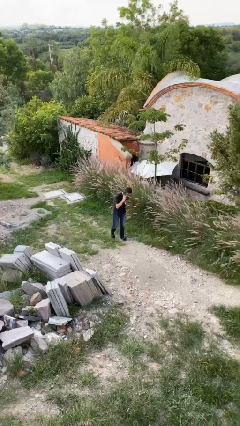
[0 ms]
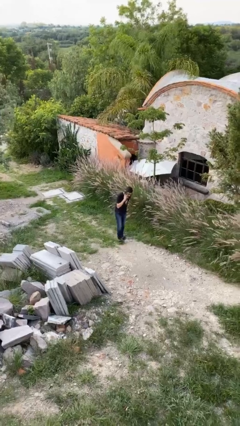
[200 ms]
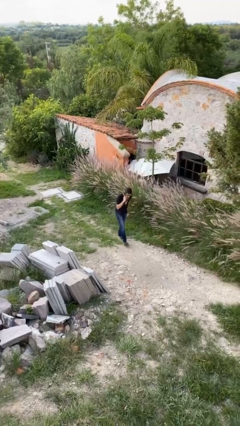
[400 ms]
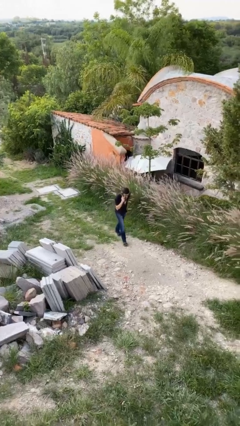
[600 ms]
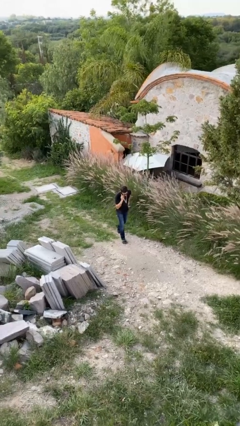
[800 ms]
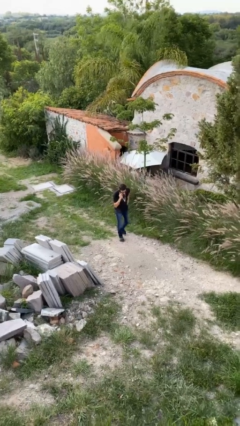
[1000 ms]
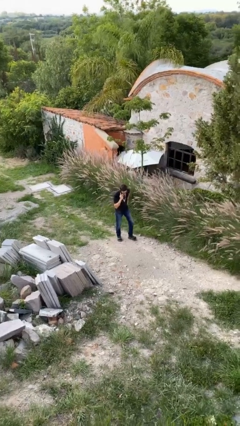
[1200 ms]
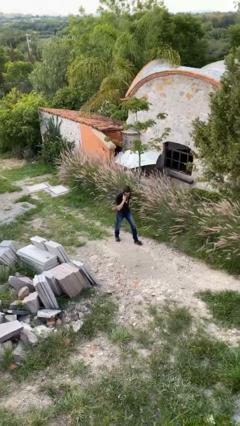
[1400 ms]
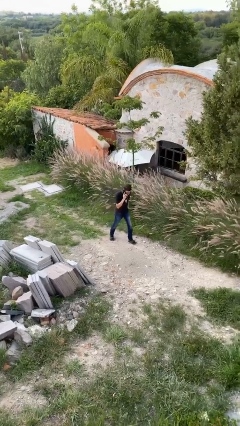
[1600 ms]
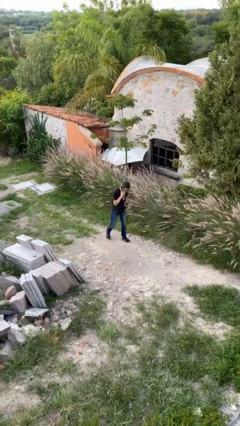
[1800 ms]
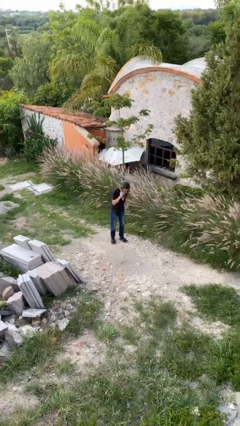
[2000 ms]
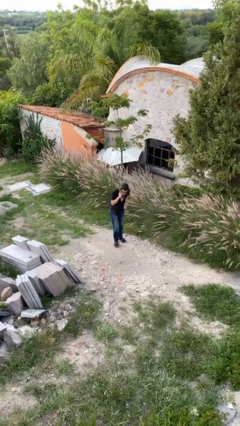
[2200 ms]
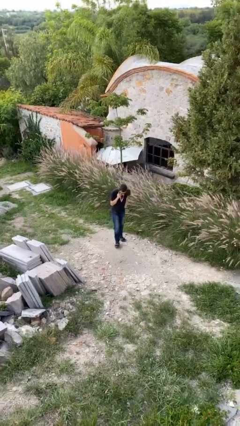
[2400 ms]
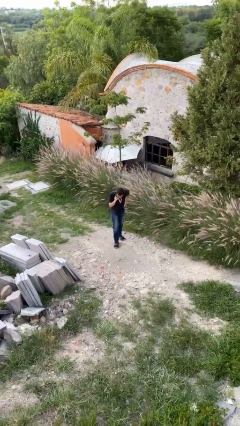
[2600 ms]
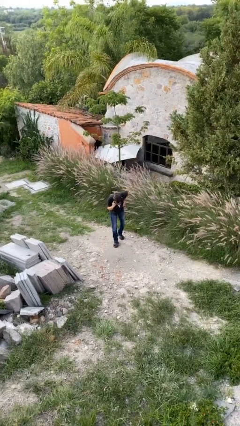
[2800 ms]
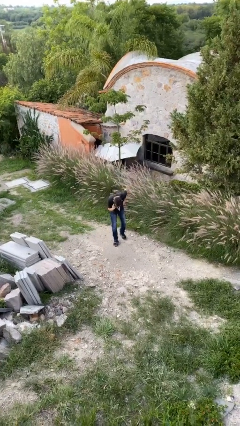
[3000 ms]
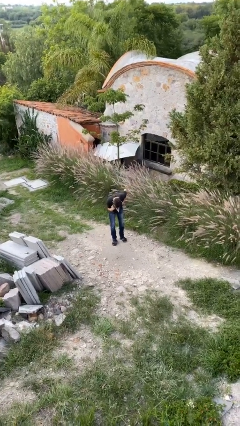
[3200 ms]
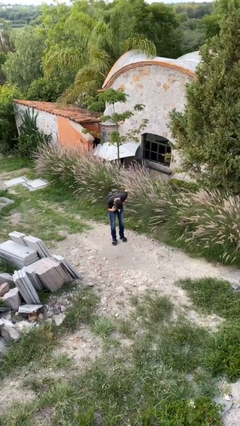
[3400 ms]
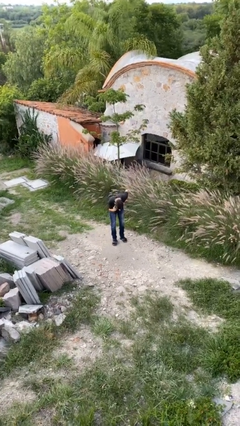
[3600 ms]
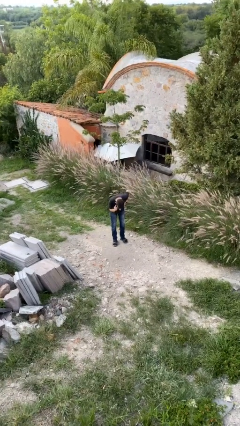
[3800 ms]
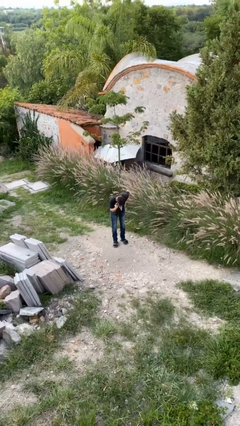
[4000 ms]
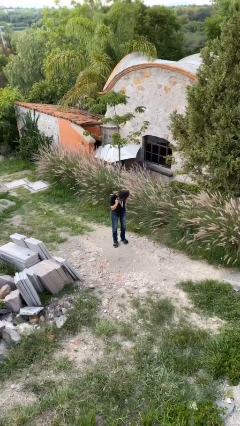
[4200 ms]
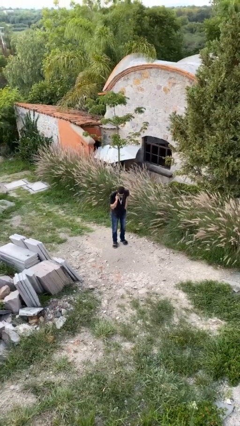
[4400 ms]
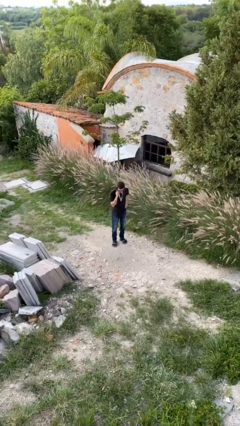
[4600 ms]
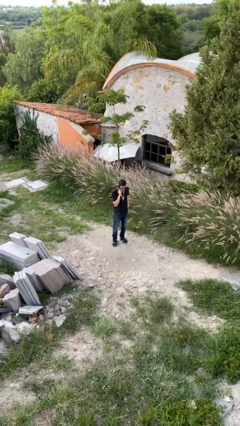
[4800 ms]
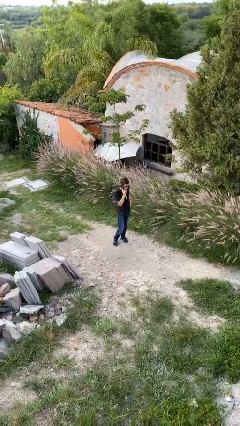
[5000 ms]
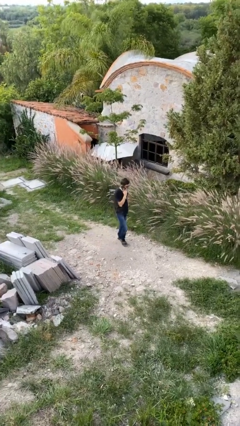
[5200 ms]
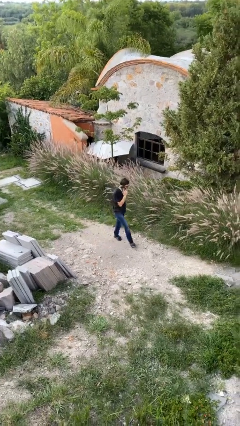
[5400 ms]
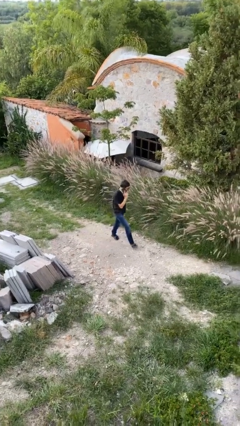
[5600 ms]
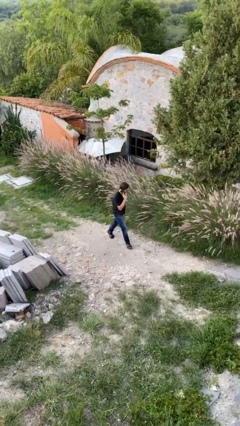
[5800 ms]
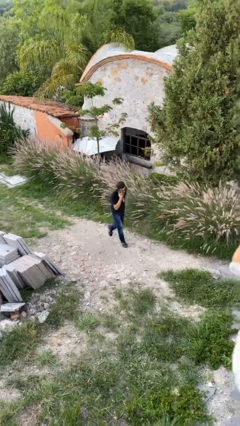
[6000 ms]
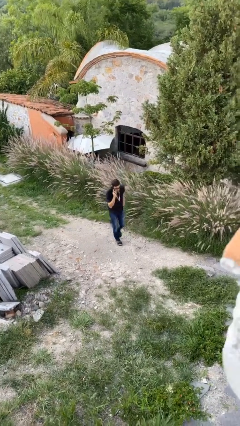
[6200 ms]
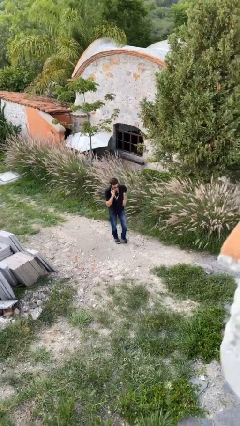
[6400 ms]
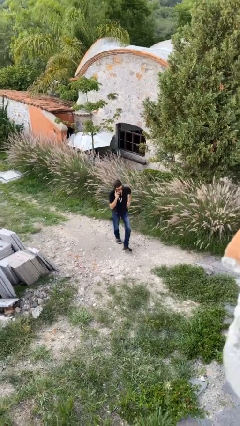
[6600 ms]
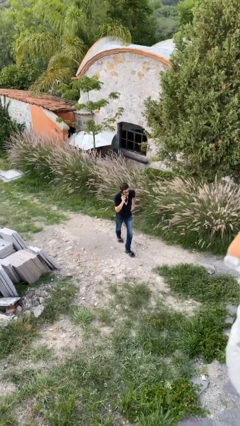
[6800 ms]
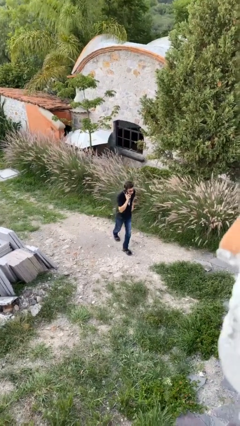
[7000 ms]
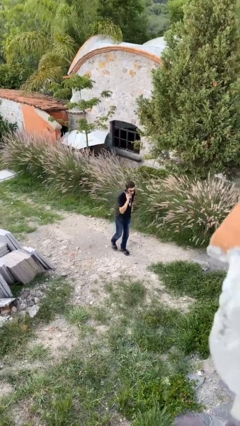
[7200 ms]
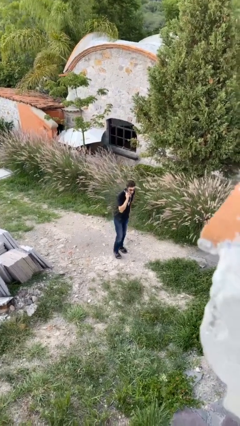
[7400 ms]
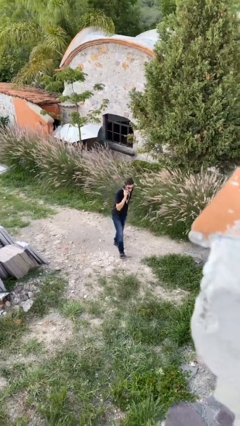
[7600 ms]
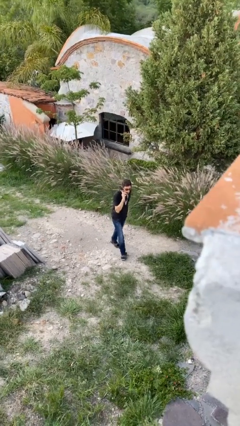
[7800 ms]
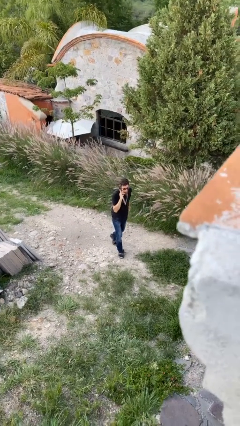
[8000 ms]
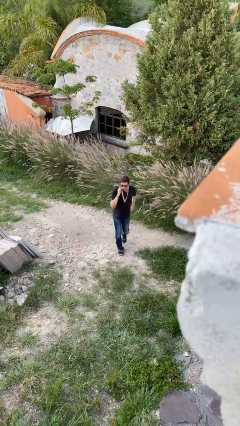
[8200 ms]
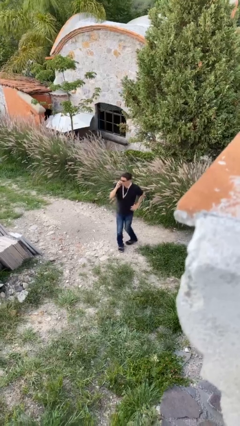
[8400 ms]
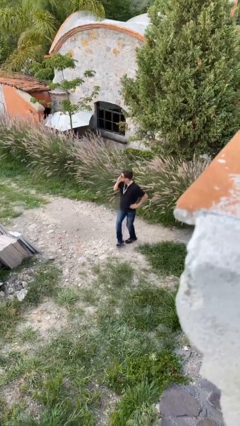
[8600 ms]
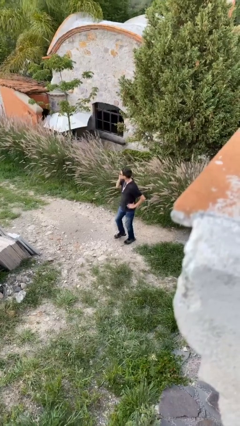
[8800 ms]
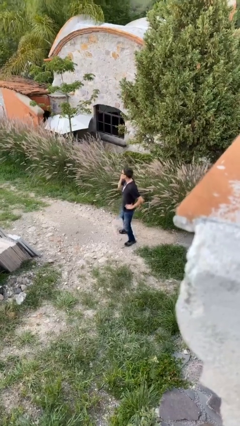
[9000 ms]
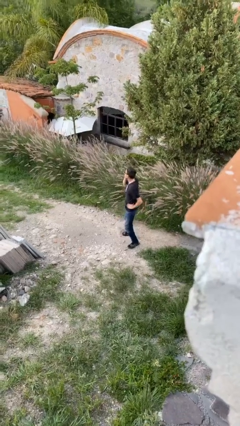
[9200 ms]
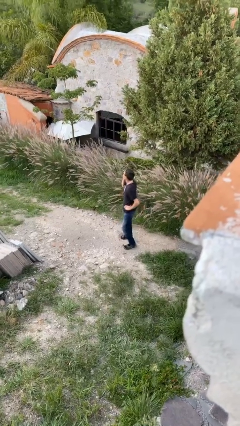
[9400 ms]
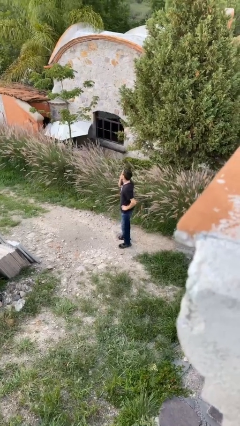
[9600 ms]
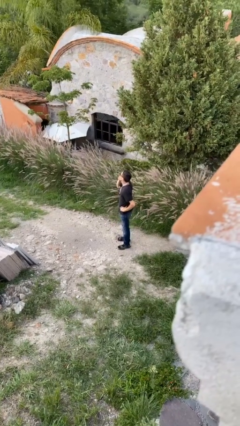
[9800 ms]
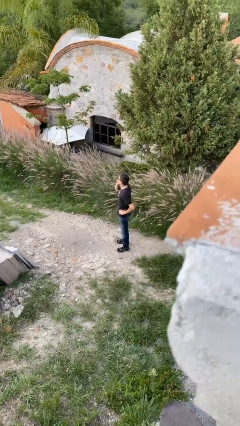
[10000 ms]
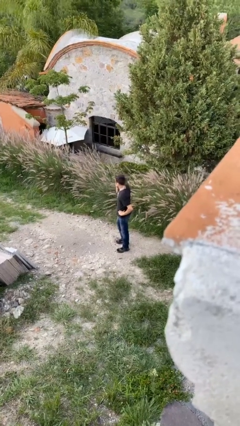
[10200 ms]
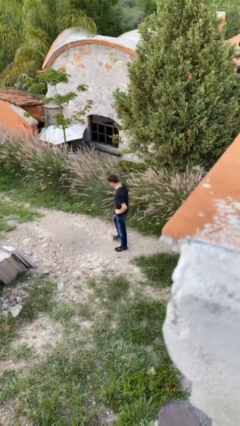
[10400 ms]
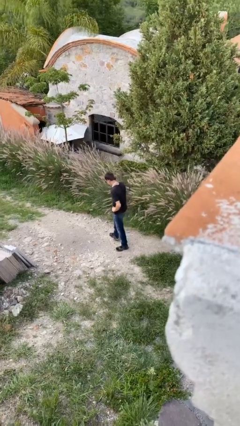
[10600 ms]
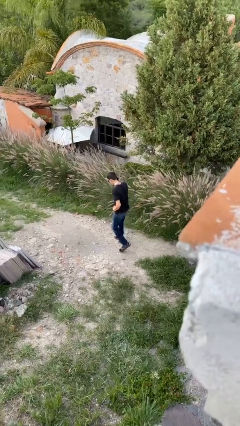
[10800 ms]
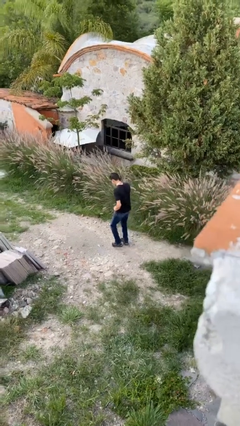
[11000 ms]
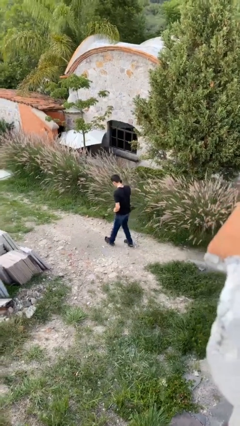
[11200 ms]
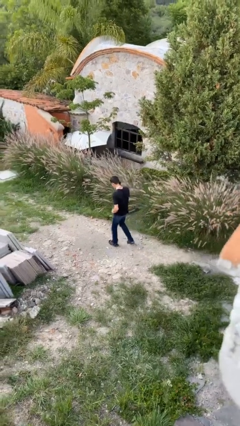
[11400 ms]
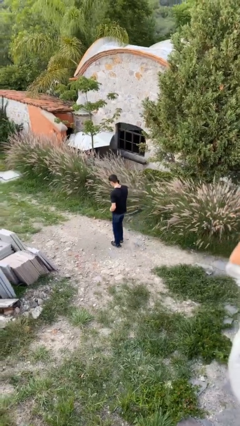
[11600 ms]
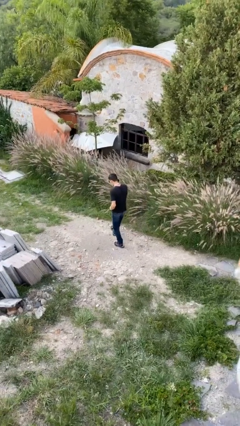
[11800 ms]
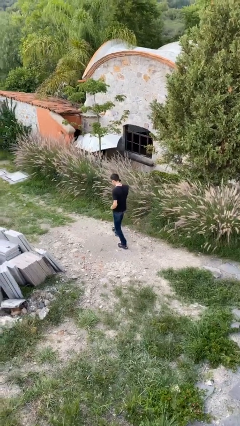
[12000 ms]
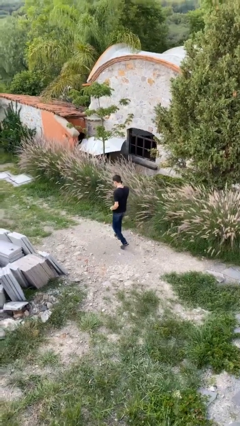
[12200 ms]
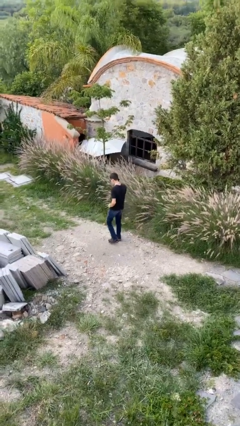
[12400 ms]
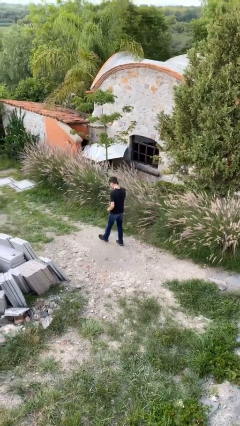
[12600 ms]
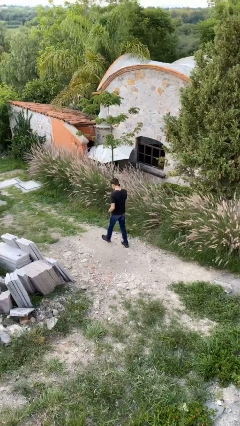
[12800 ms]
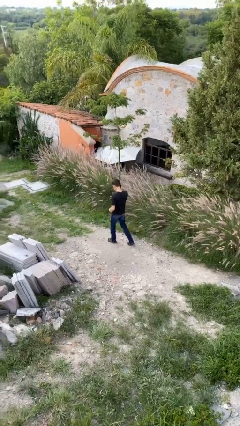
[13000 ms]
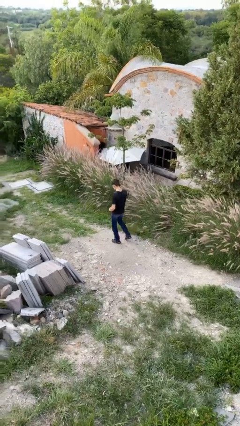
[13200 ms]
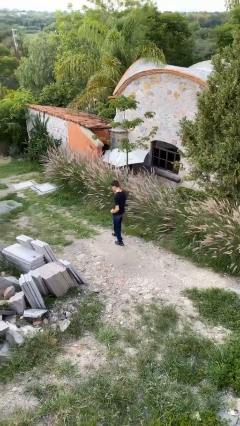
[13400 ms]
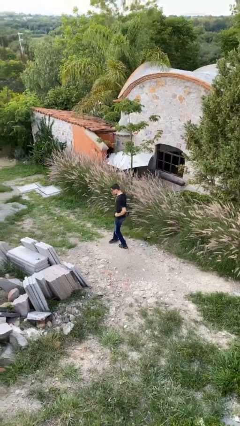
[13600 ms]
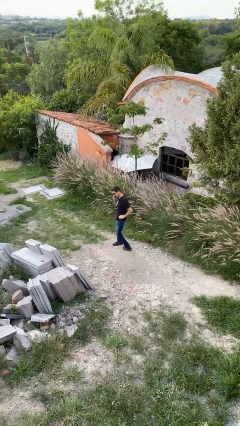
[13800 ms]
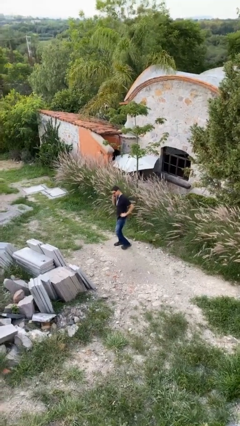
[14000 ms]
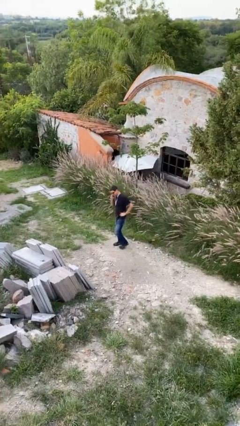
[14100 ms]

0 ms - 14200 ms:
person talks on phone

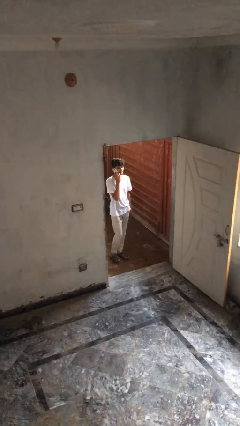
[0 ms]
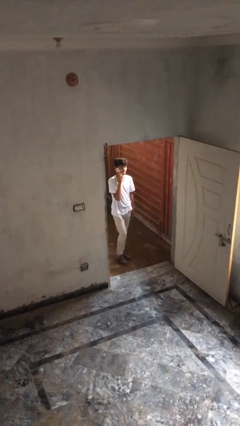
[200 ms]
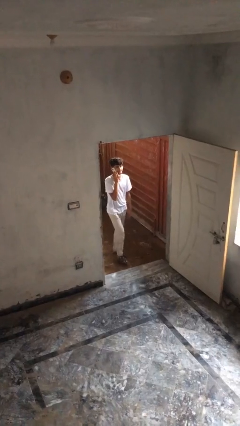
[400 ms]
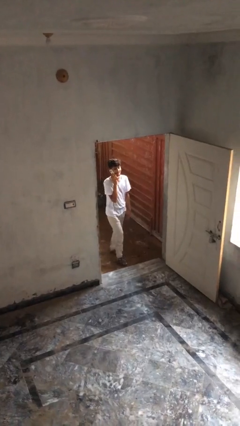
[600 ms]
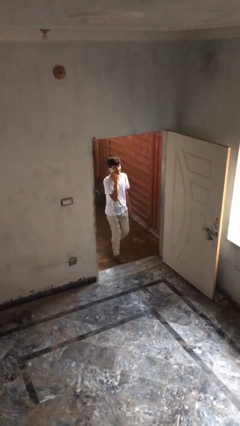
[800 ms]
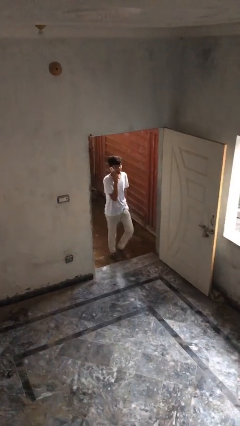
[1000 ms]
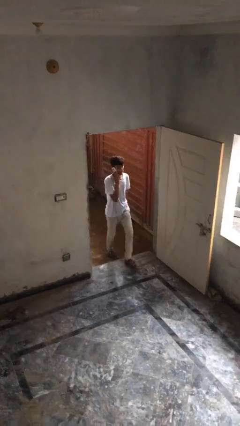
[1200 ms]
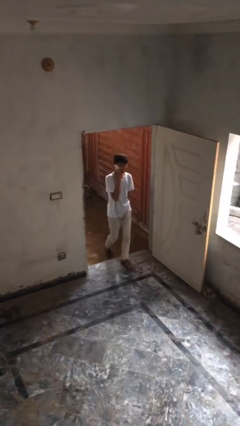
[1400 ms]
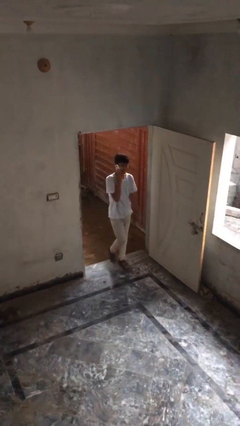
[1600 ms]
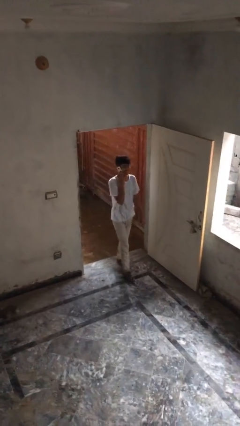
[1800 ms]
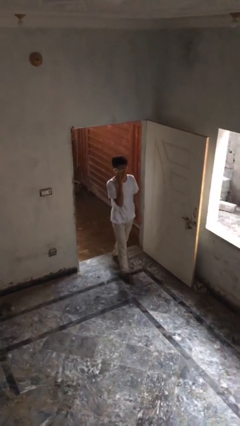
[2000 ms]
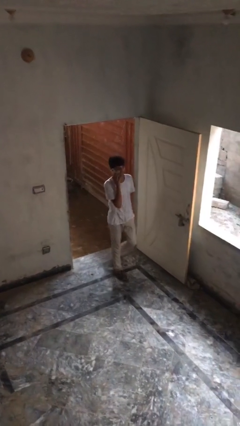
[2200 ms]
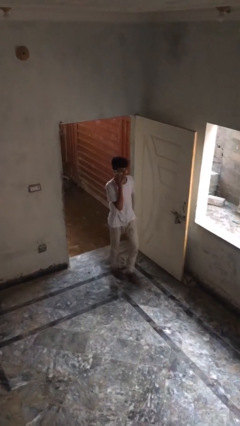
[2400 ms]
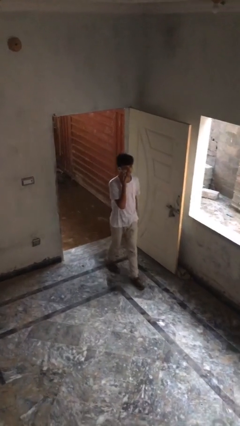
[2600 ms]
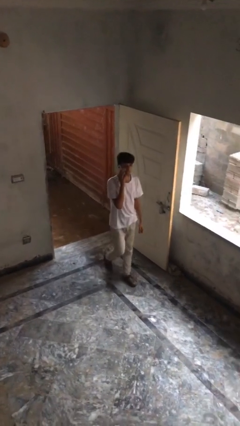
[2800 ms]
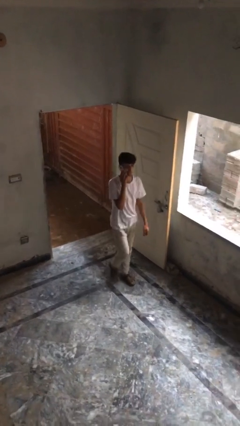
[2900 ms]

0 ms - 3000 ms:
person enters scene through structure

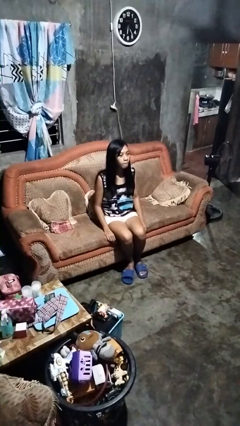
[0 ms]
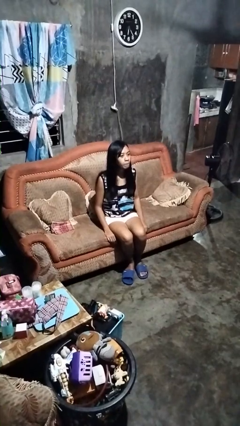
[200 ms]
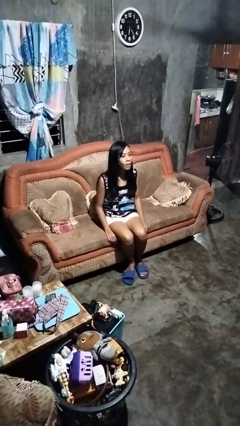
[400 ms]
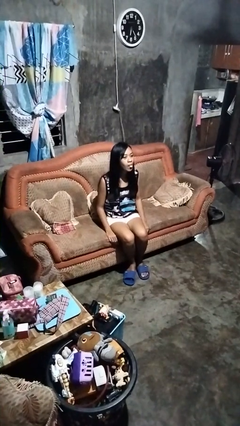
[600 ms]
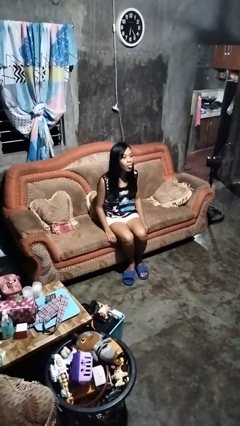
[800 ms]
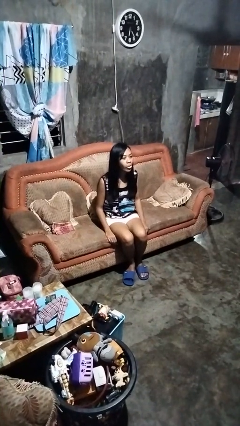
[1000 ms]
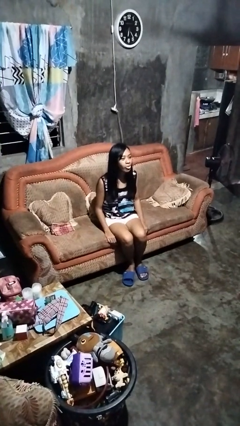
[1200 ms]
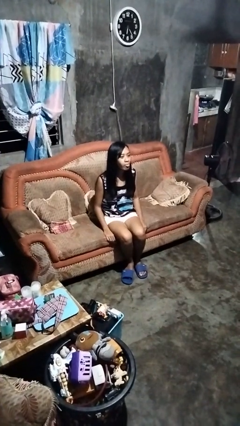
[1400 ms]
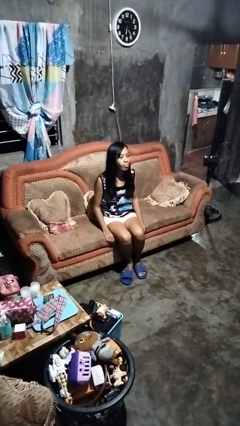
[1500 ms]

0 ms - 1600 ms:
person sticks out tongue
